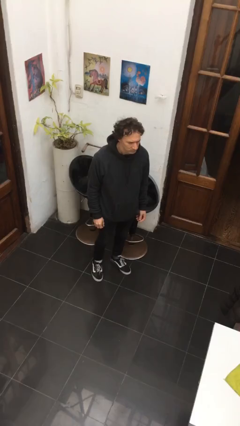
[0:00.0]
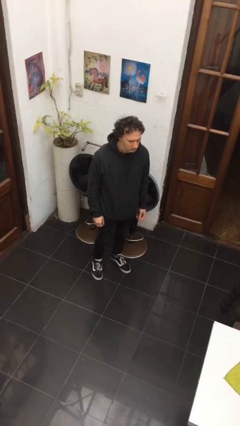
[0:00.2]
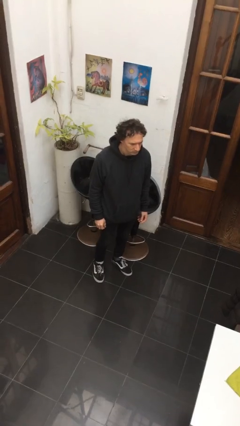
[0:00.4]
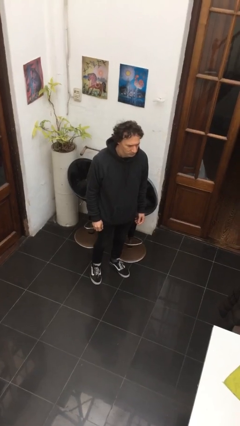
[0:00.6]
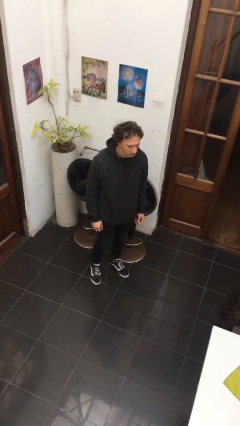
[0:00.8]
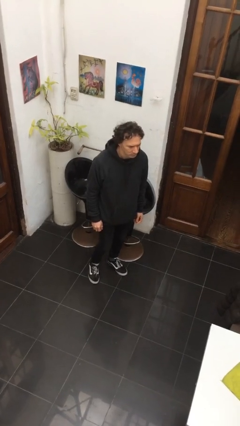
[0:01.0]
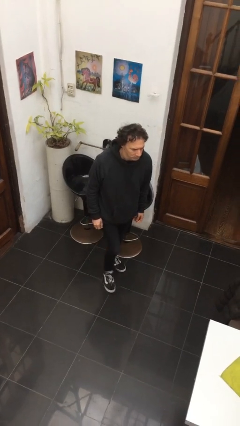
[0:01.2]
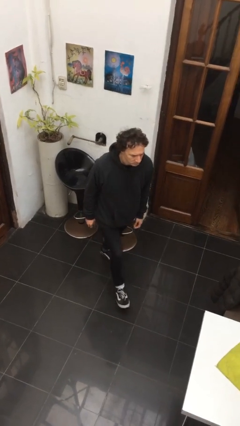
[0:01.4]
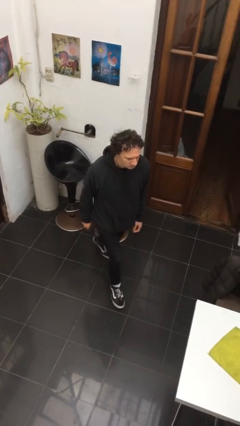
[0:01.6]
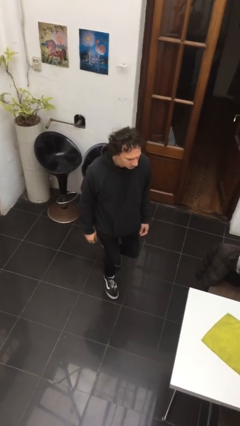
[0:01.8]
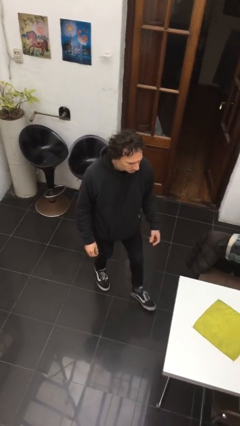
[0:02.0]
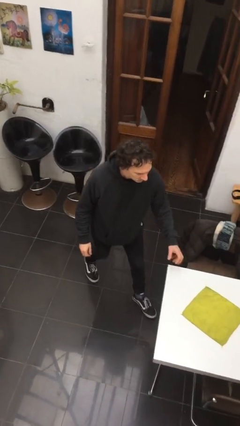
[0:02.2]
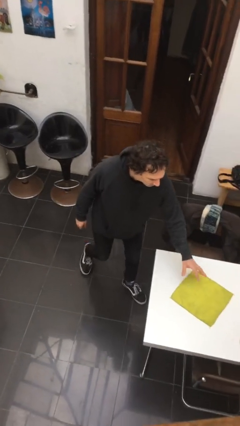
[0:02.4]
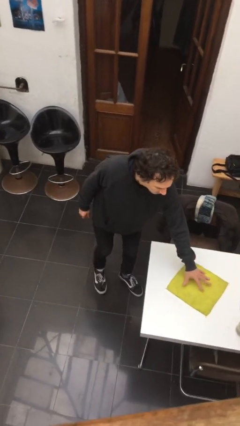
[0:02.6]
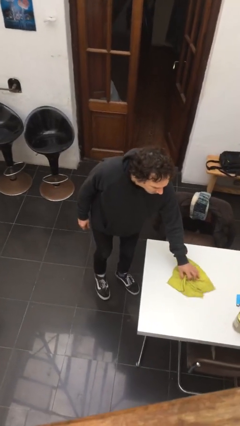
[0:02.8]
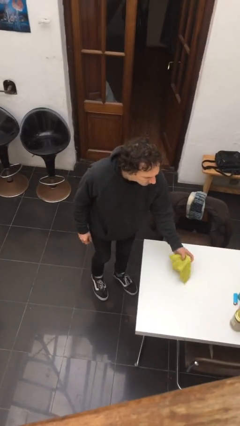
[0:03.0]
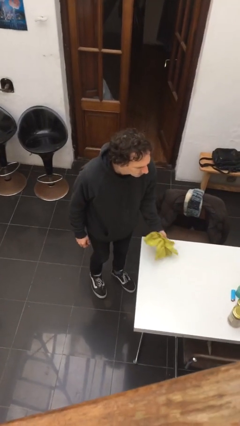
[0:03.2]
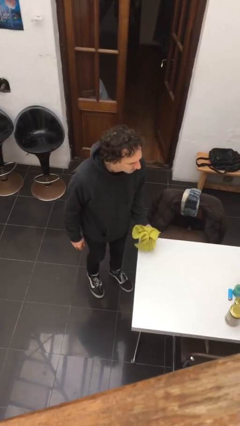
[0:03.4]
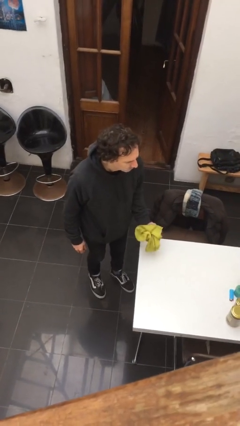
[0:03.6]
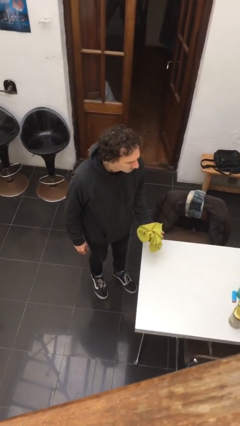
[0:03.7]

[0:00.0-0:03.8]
person picks up object from table

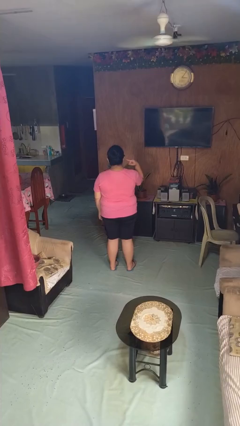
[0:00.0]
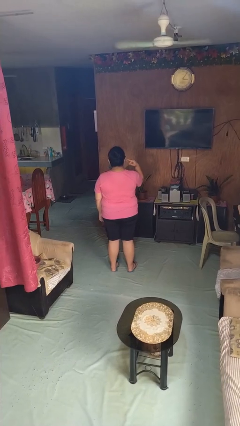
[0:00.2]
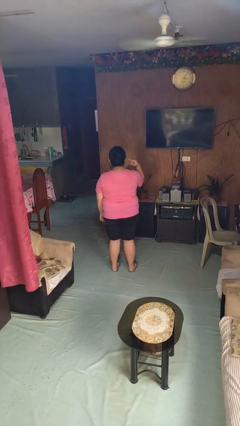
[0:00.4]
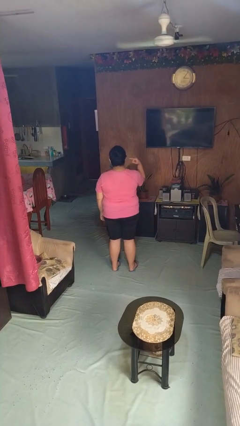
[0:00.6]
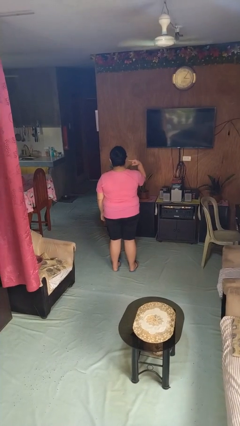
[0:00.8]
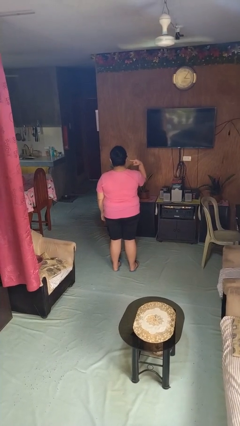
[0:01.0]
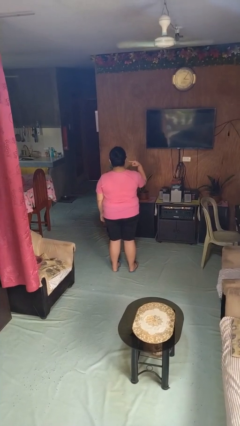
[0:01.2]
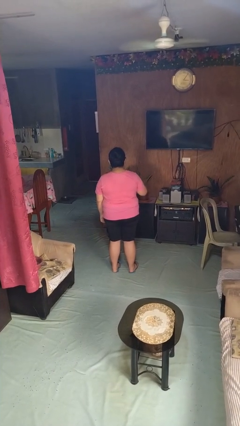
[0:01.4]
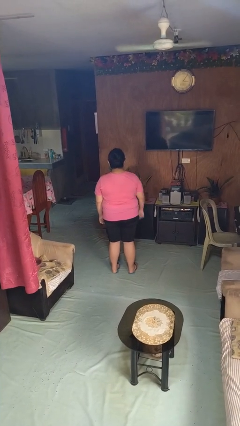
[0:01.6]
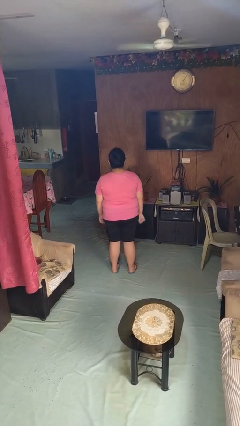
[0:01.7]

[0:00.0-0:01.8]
person gestures listen closely

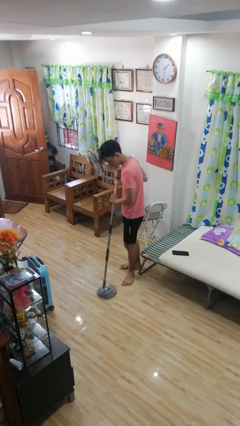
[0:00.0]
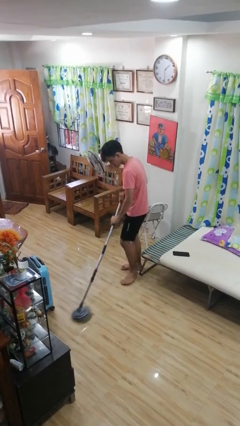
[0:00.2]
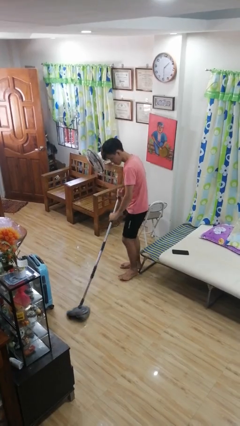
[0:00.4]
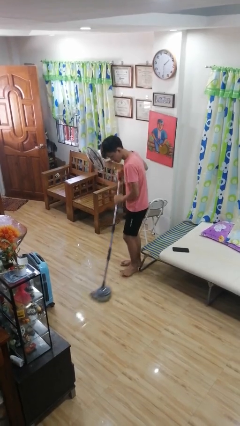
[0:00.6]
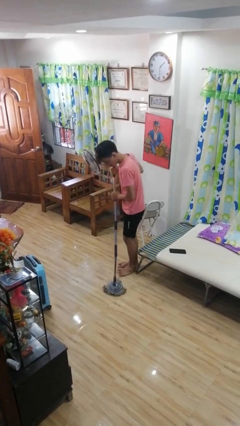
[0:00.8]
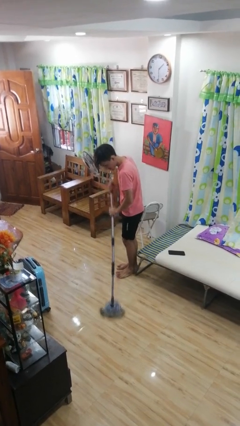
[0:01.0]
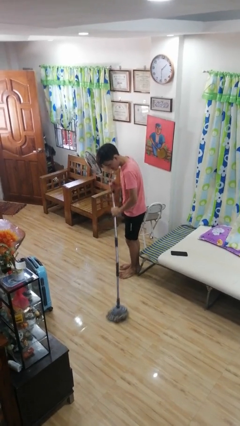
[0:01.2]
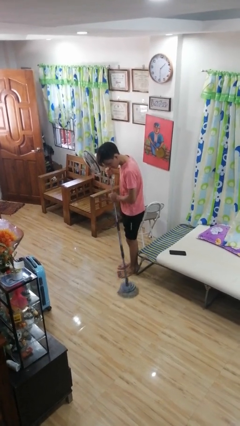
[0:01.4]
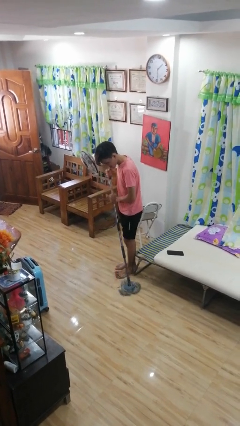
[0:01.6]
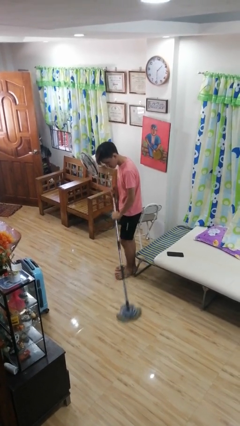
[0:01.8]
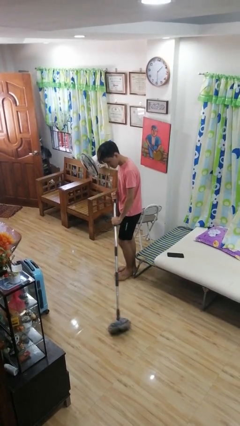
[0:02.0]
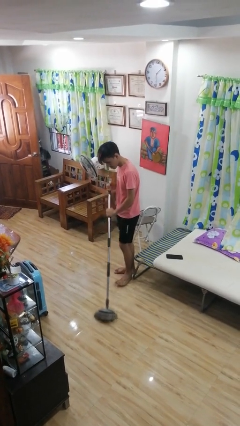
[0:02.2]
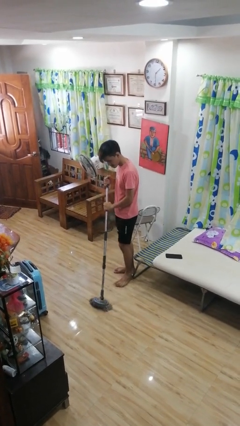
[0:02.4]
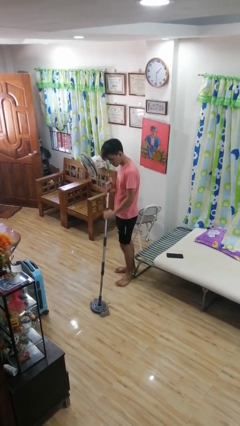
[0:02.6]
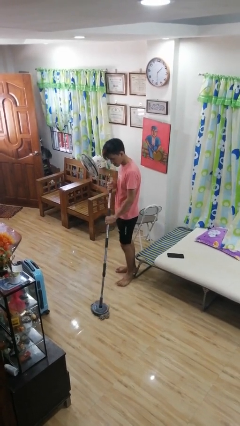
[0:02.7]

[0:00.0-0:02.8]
person mops

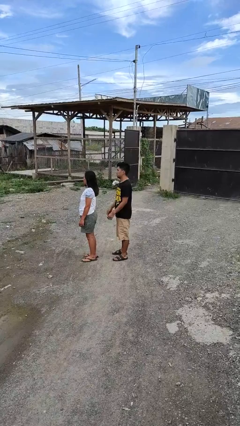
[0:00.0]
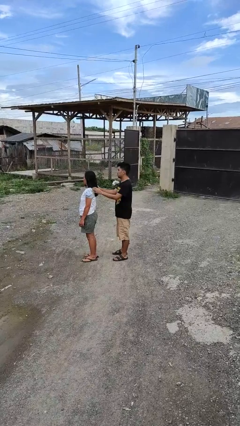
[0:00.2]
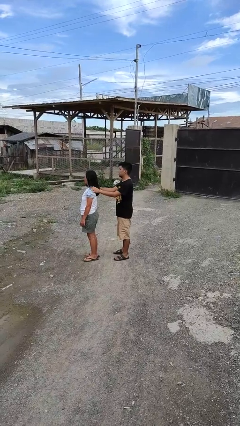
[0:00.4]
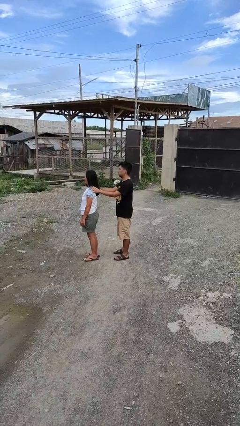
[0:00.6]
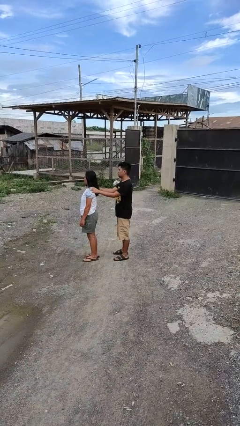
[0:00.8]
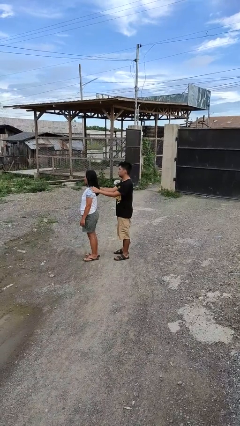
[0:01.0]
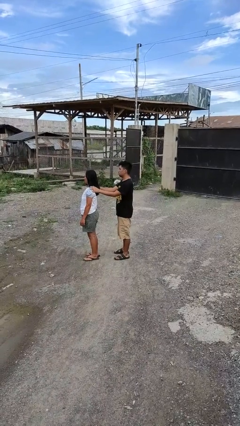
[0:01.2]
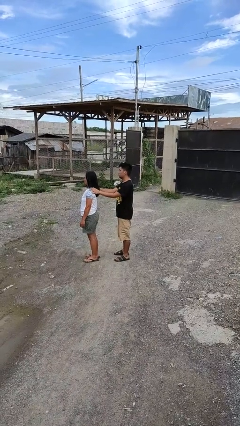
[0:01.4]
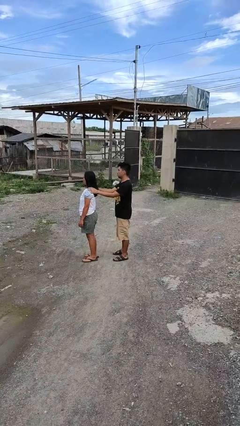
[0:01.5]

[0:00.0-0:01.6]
person grabs person by shoulder

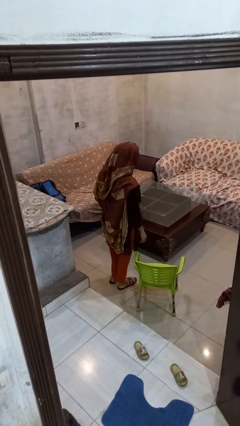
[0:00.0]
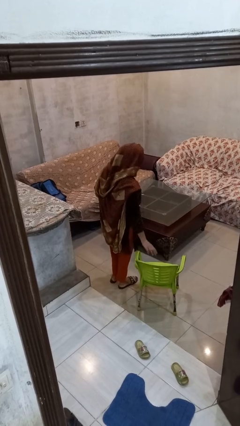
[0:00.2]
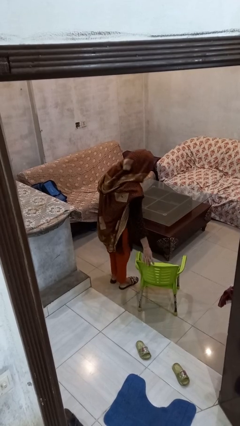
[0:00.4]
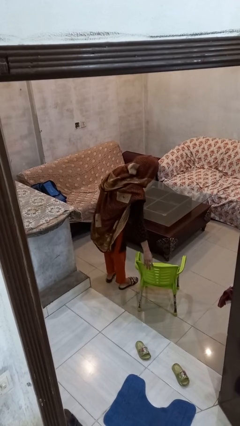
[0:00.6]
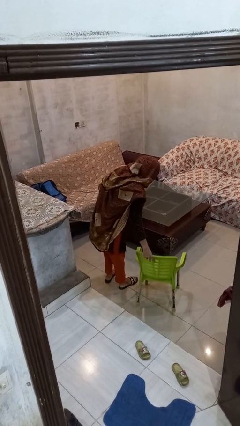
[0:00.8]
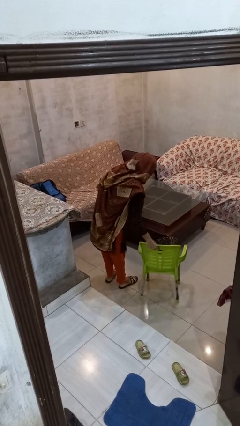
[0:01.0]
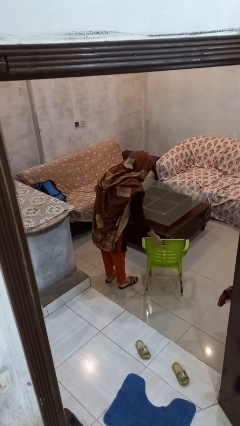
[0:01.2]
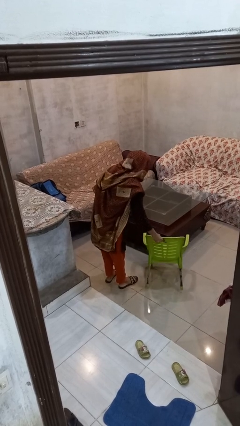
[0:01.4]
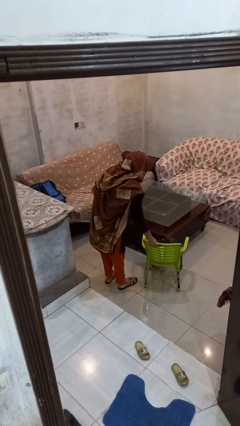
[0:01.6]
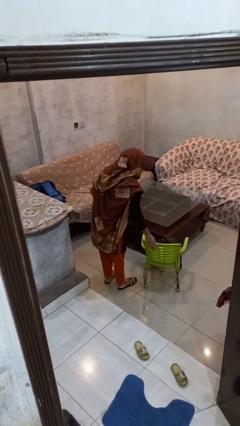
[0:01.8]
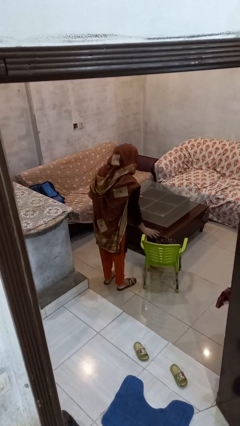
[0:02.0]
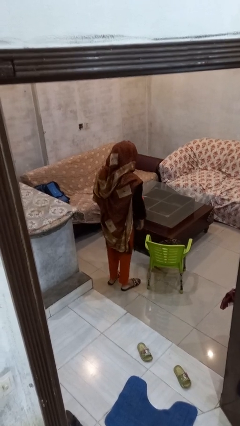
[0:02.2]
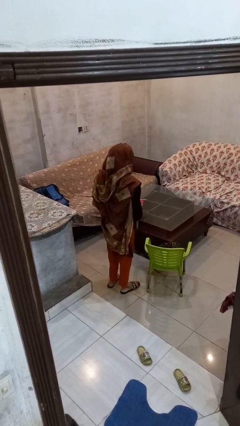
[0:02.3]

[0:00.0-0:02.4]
person pushes in chair

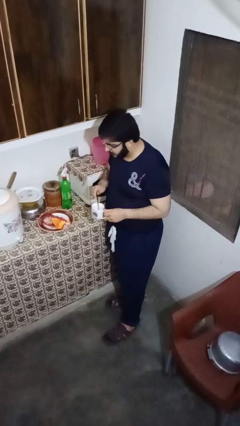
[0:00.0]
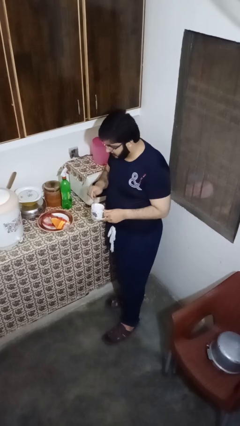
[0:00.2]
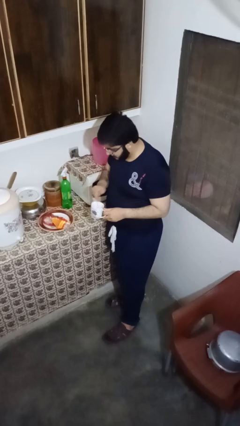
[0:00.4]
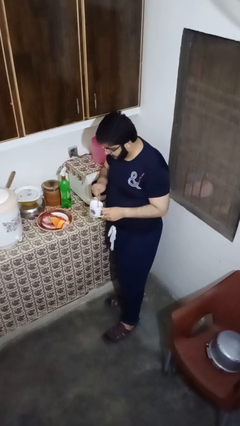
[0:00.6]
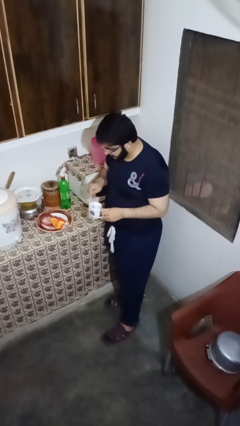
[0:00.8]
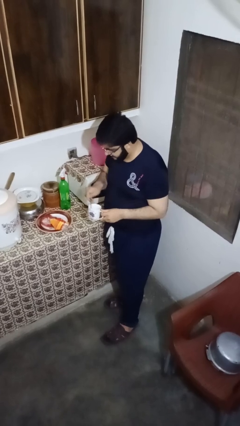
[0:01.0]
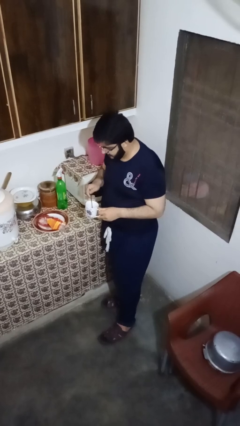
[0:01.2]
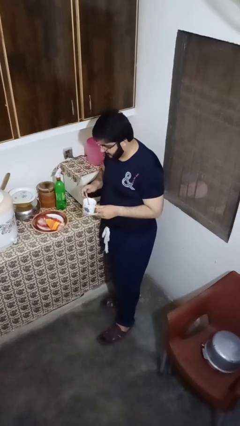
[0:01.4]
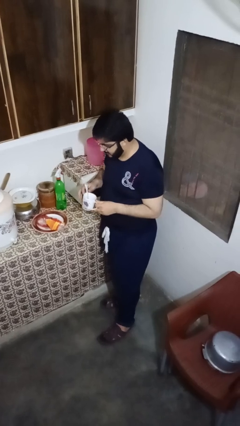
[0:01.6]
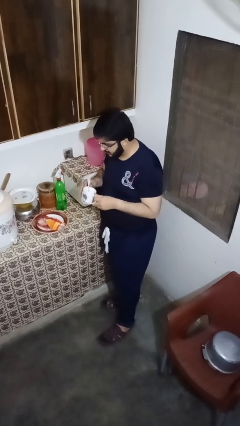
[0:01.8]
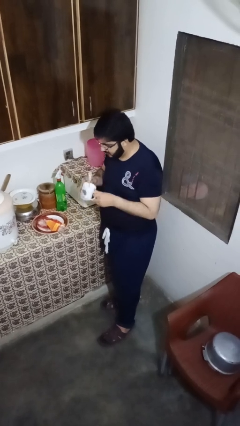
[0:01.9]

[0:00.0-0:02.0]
person stirs mug

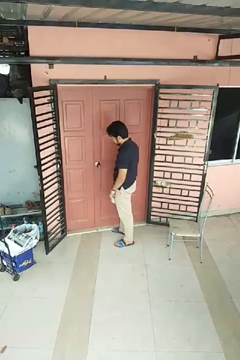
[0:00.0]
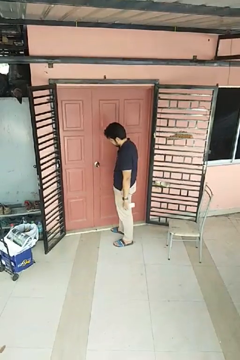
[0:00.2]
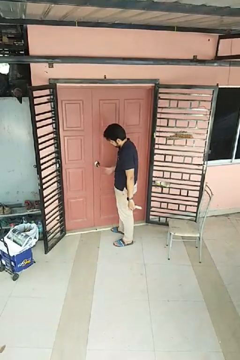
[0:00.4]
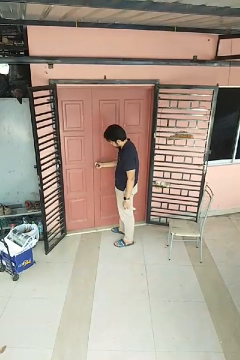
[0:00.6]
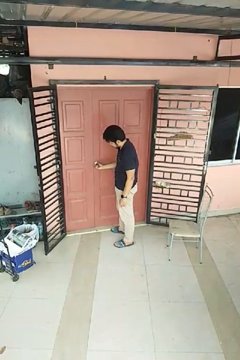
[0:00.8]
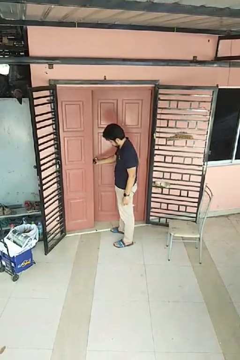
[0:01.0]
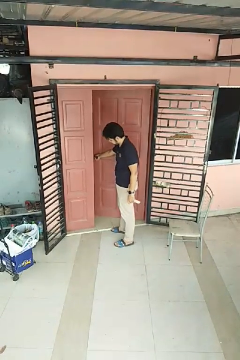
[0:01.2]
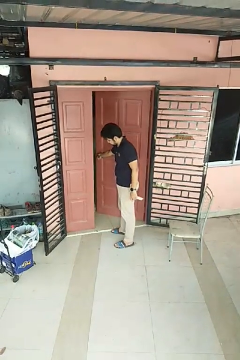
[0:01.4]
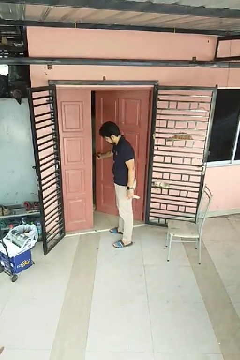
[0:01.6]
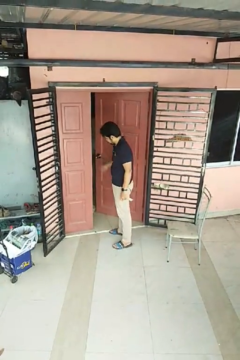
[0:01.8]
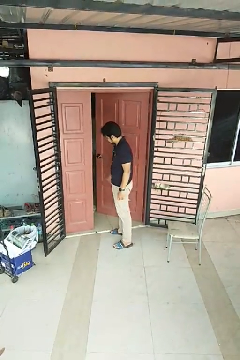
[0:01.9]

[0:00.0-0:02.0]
person opens facility door

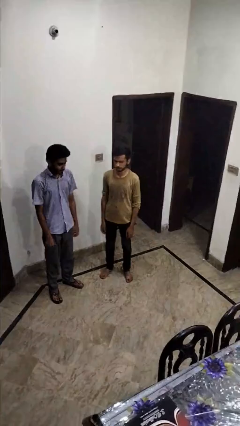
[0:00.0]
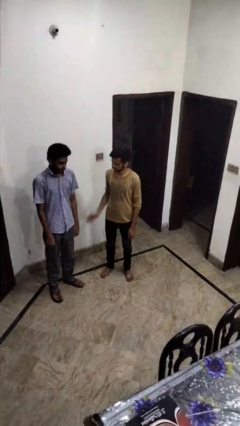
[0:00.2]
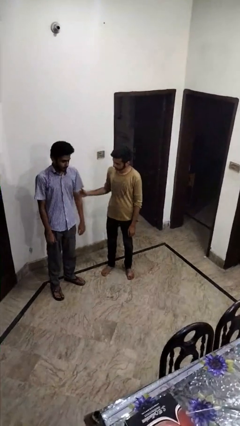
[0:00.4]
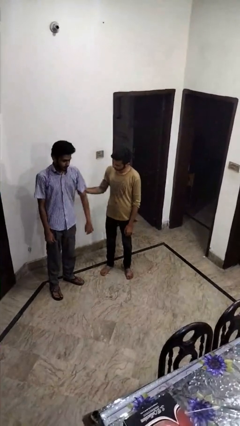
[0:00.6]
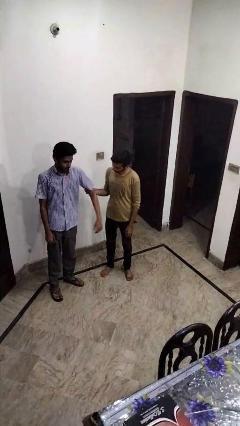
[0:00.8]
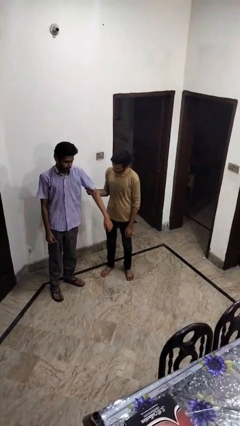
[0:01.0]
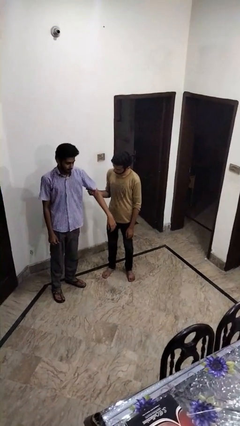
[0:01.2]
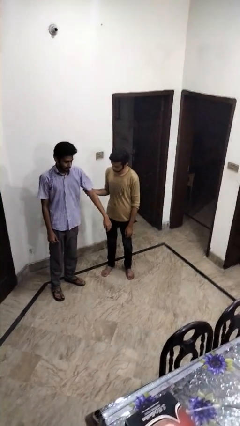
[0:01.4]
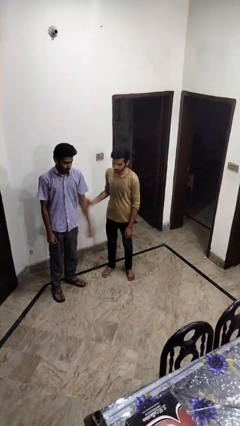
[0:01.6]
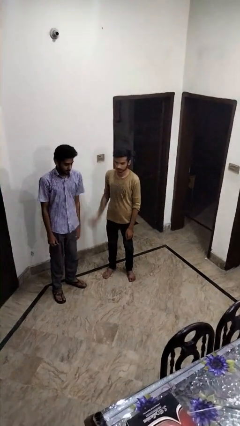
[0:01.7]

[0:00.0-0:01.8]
person grabs person by bicep
